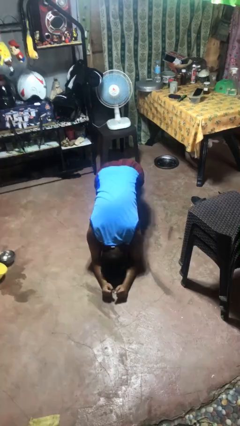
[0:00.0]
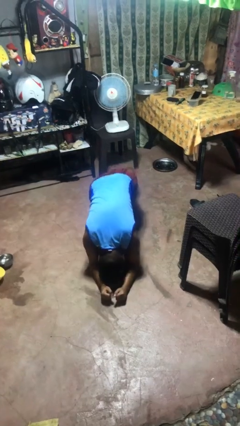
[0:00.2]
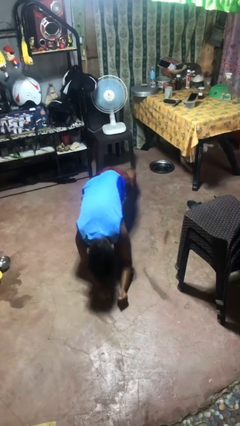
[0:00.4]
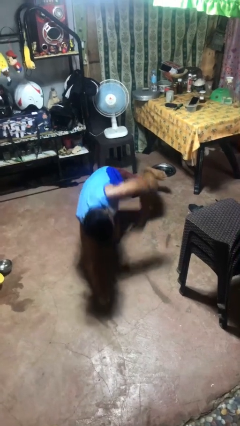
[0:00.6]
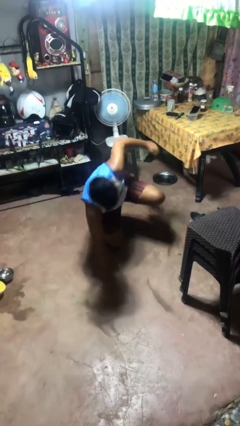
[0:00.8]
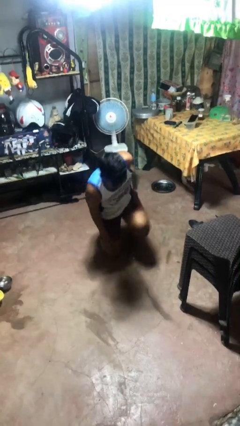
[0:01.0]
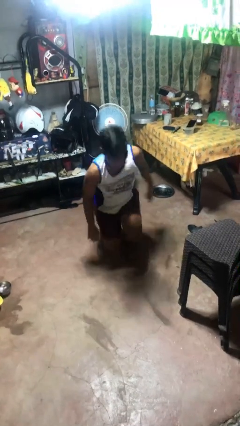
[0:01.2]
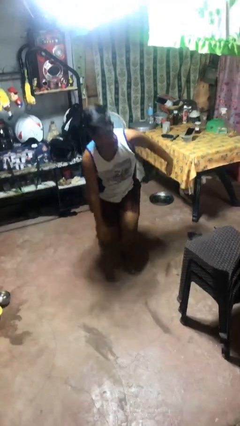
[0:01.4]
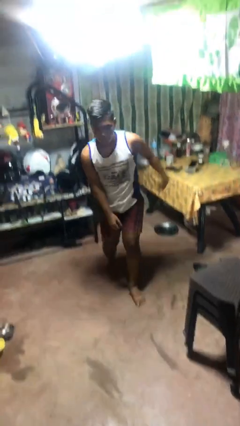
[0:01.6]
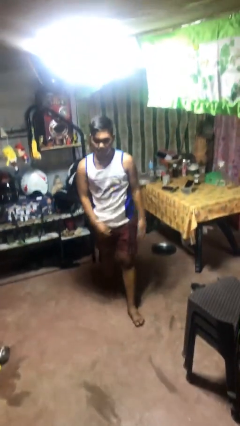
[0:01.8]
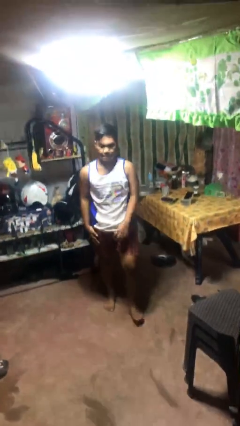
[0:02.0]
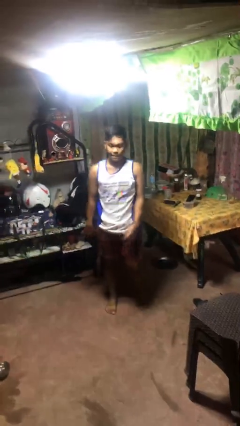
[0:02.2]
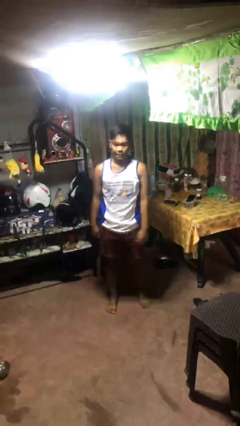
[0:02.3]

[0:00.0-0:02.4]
person stands up from floor

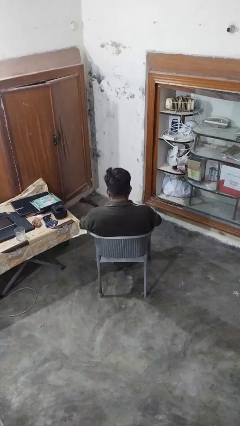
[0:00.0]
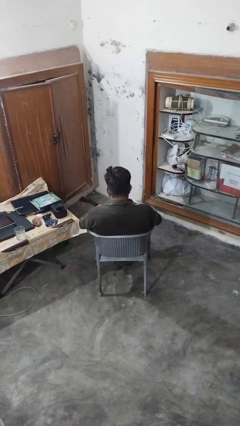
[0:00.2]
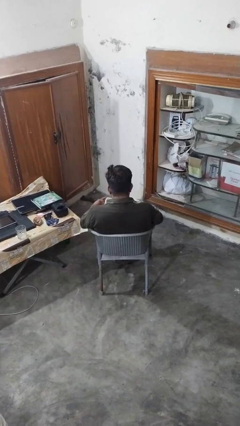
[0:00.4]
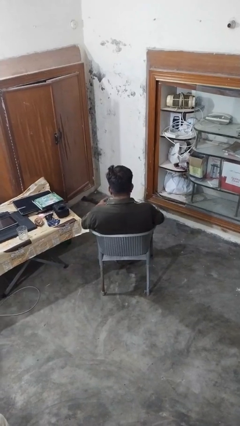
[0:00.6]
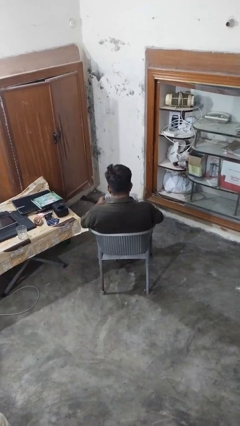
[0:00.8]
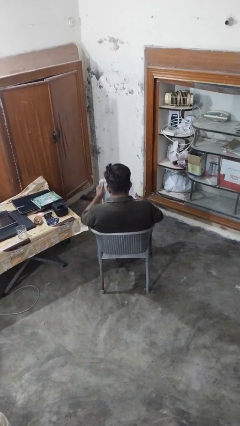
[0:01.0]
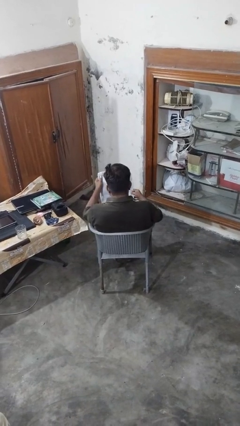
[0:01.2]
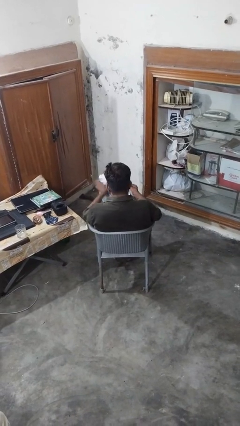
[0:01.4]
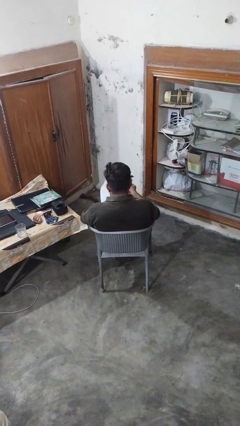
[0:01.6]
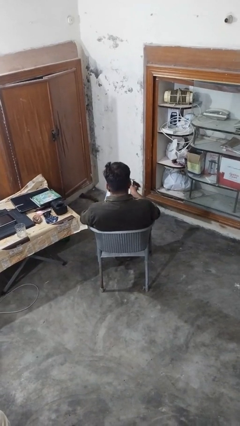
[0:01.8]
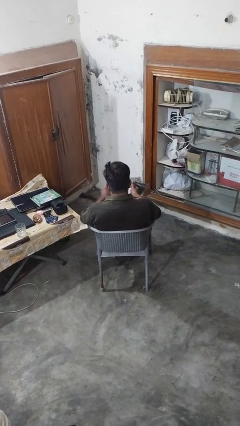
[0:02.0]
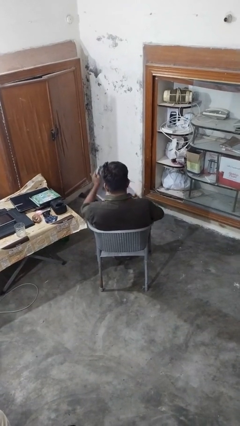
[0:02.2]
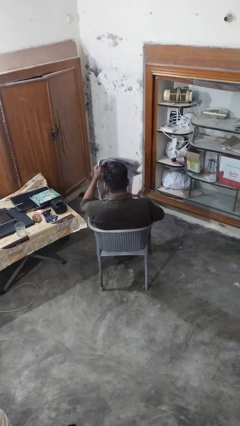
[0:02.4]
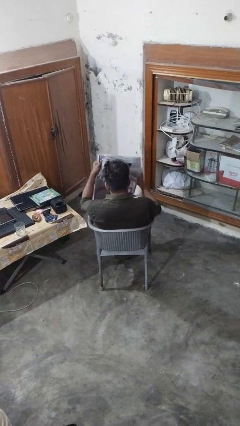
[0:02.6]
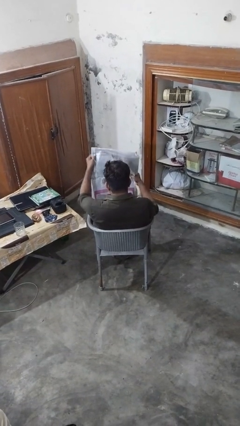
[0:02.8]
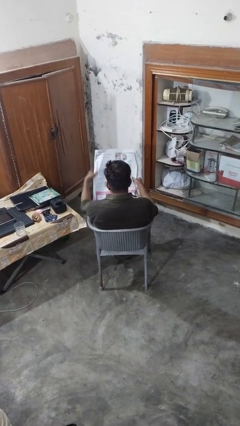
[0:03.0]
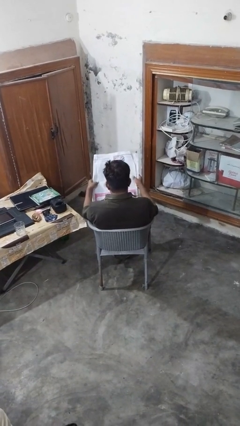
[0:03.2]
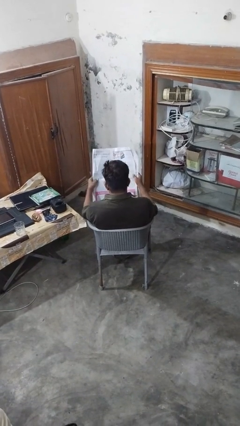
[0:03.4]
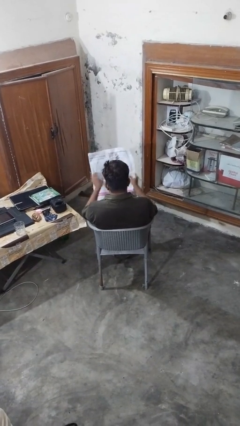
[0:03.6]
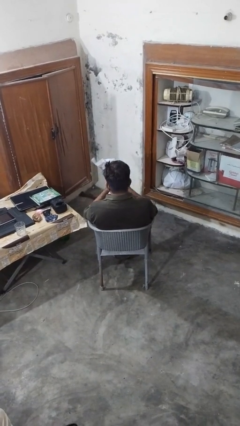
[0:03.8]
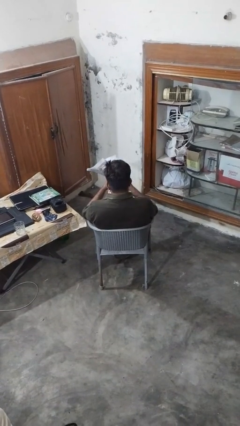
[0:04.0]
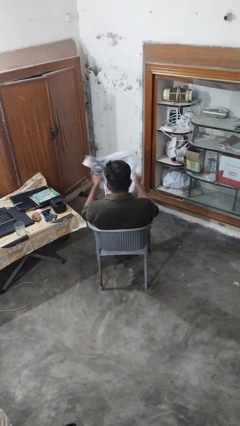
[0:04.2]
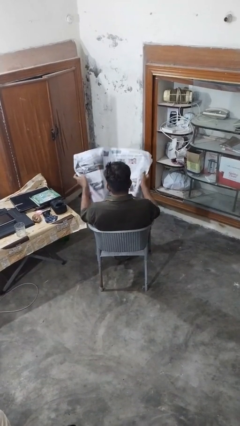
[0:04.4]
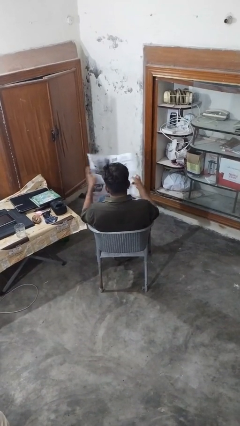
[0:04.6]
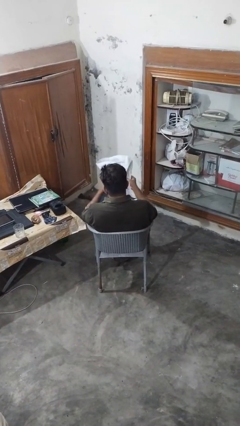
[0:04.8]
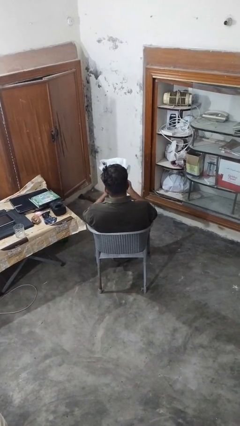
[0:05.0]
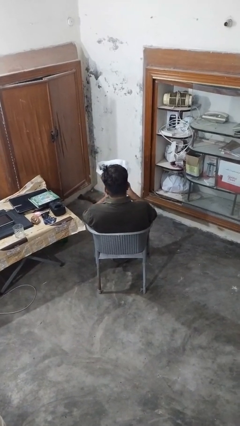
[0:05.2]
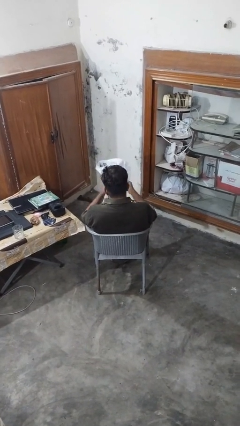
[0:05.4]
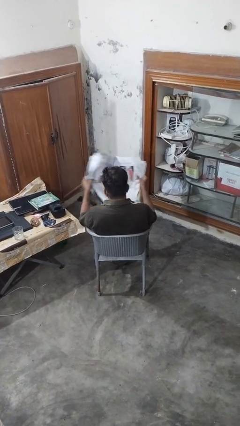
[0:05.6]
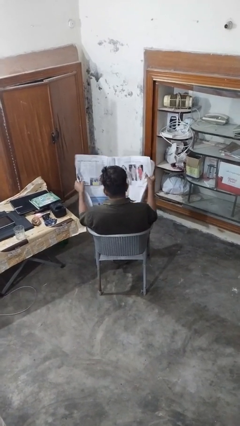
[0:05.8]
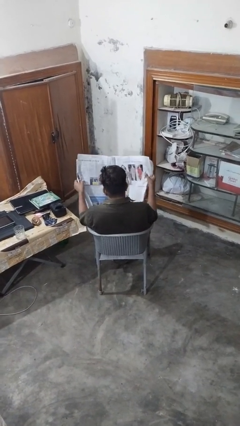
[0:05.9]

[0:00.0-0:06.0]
person reads newspaper

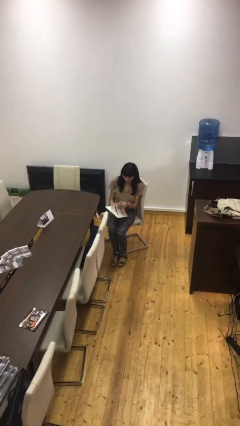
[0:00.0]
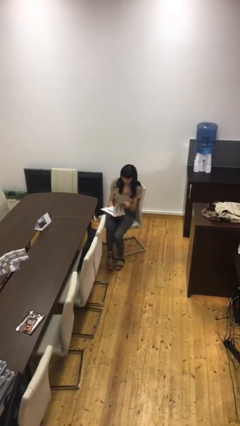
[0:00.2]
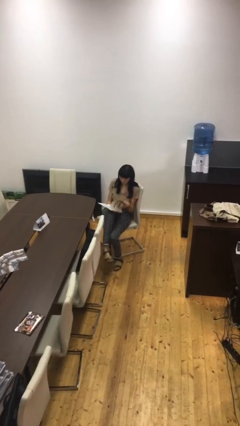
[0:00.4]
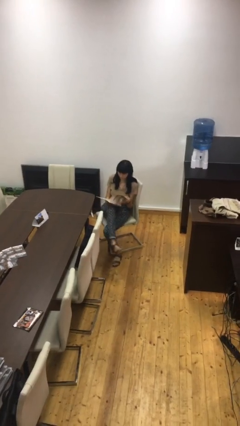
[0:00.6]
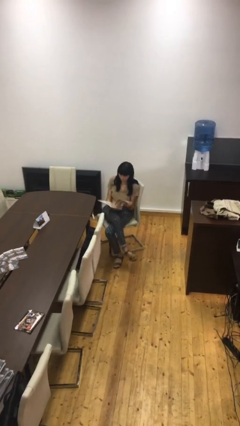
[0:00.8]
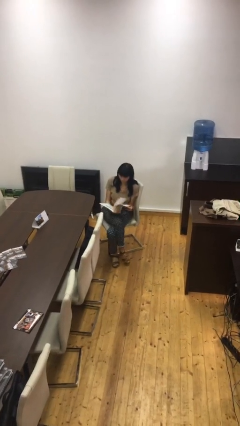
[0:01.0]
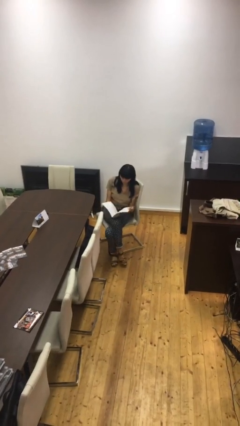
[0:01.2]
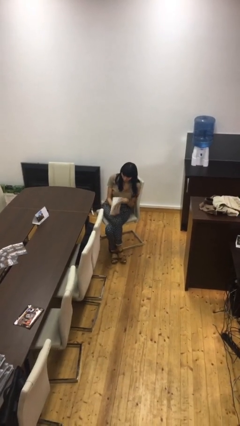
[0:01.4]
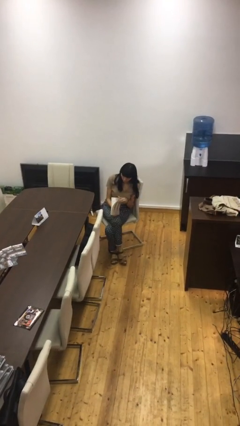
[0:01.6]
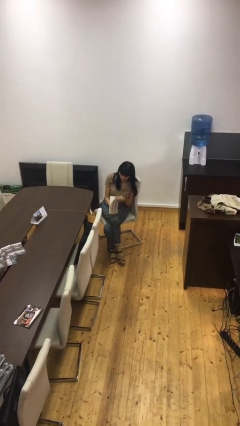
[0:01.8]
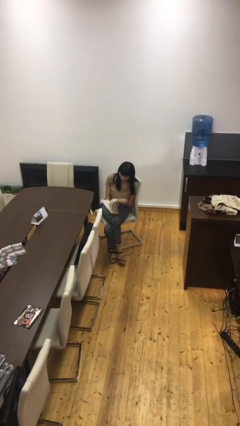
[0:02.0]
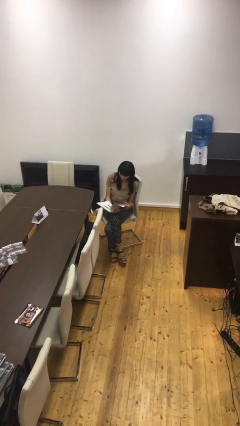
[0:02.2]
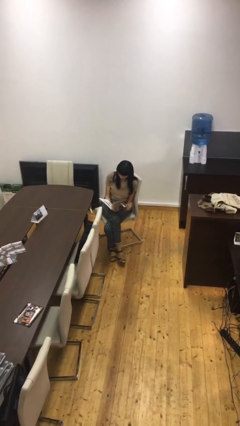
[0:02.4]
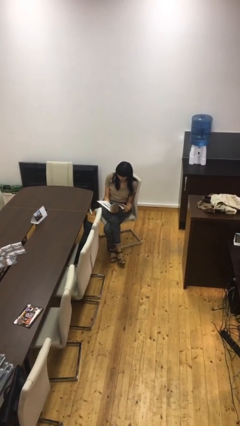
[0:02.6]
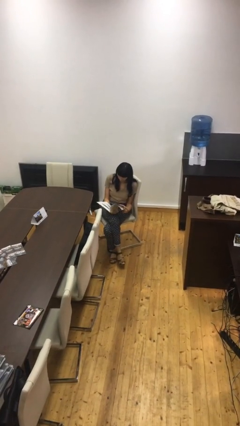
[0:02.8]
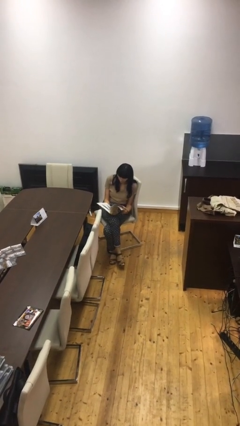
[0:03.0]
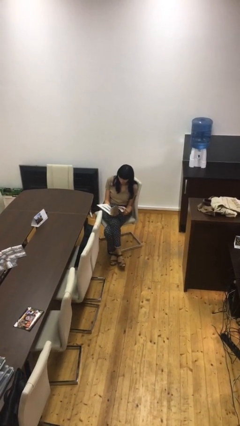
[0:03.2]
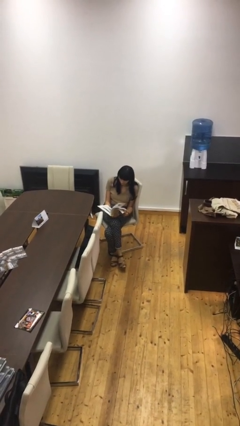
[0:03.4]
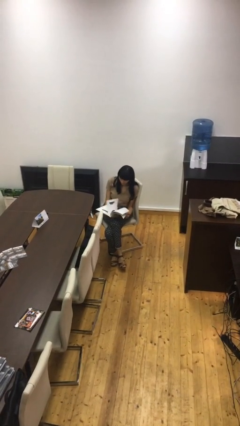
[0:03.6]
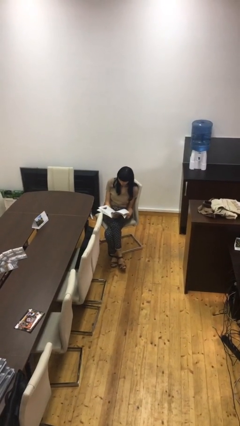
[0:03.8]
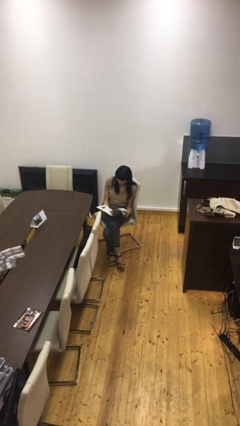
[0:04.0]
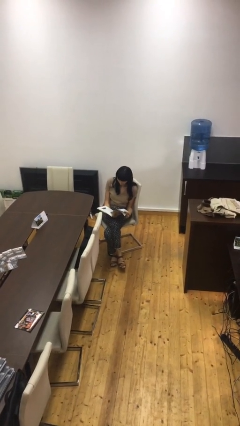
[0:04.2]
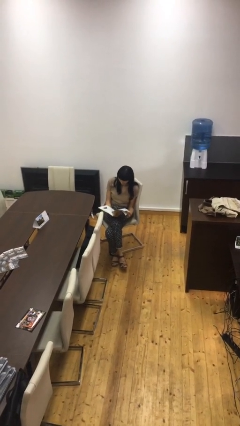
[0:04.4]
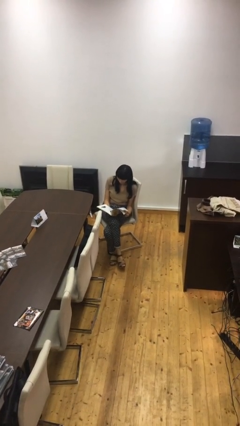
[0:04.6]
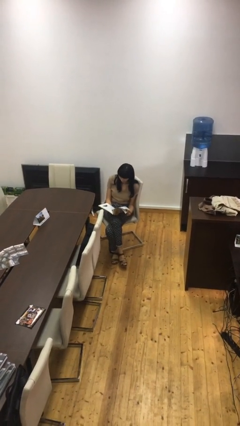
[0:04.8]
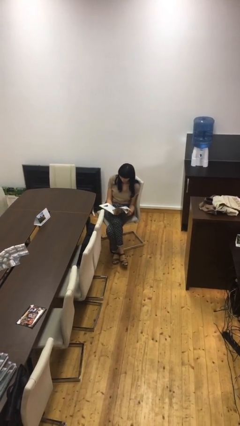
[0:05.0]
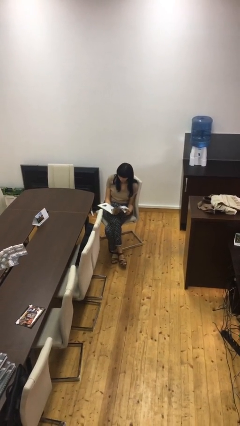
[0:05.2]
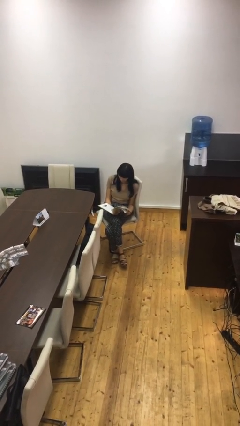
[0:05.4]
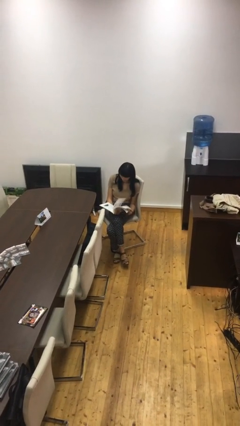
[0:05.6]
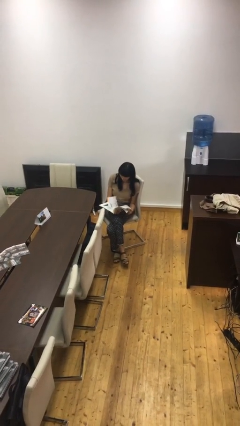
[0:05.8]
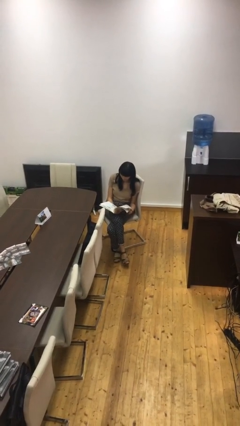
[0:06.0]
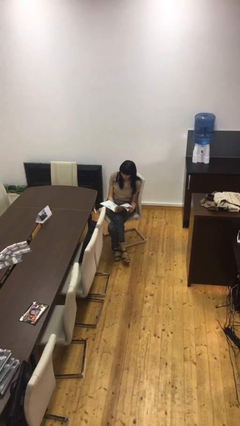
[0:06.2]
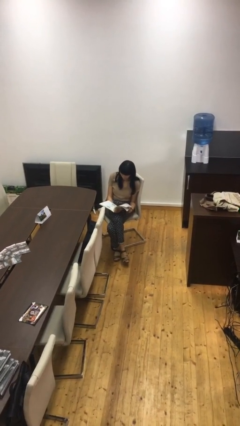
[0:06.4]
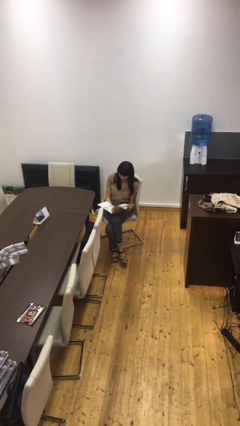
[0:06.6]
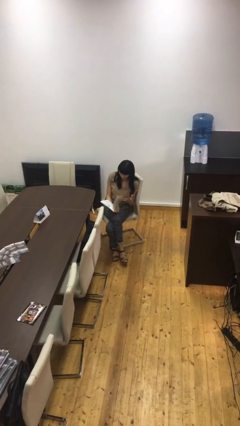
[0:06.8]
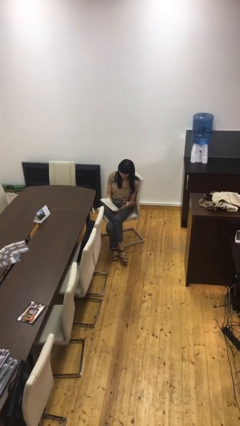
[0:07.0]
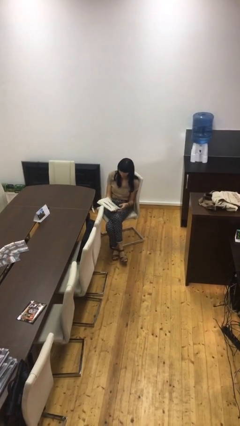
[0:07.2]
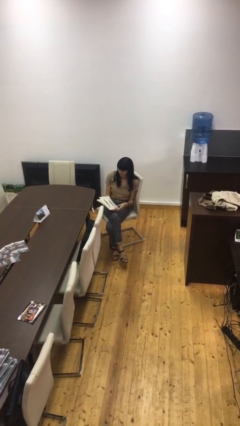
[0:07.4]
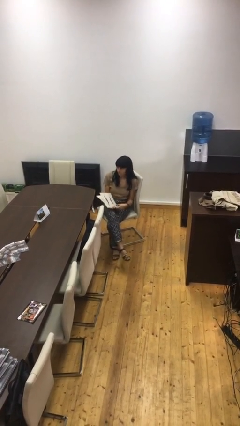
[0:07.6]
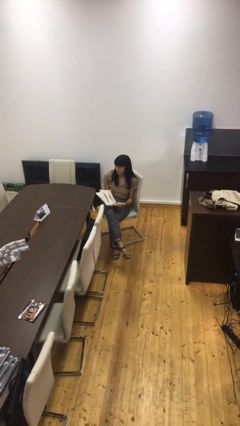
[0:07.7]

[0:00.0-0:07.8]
person reads document

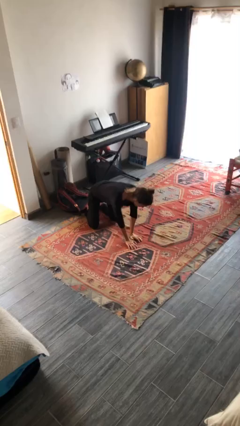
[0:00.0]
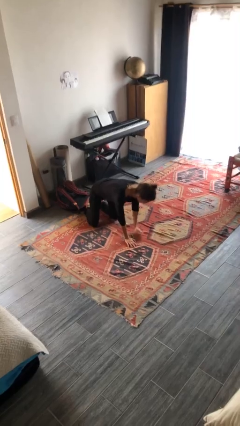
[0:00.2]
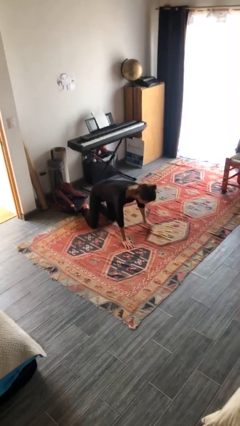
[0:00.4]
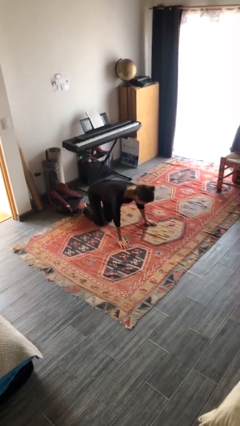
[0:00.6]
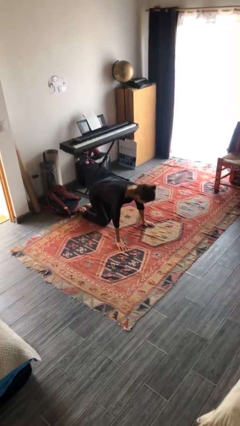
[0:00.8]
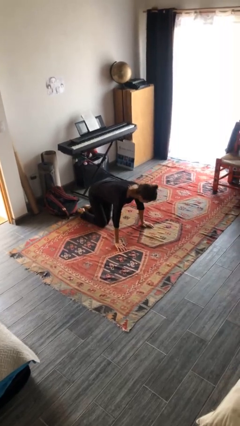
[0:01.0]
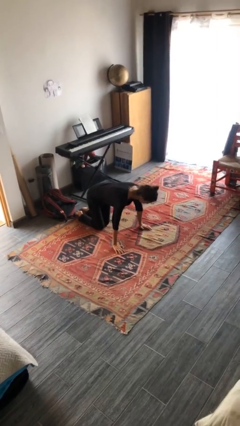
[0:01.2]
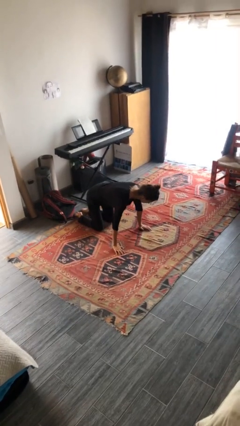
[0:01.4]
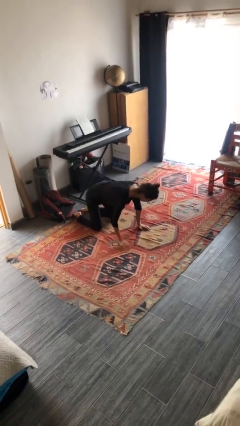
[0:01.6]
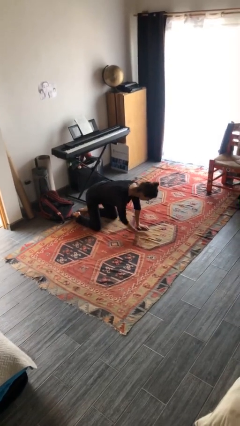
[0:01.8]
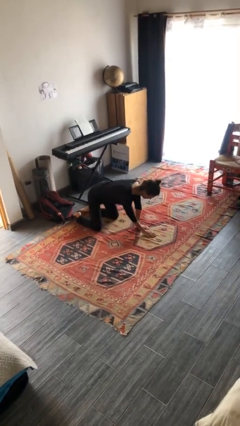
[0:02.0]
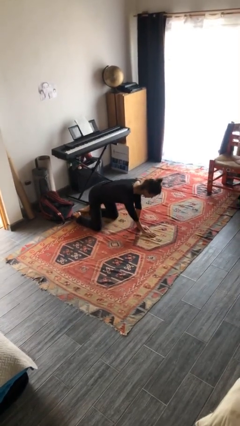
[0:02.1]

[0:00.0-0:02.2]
person crawls
